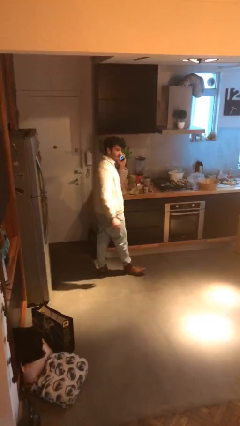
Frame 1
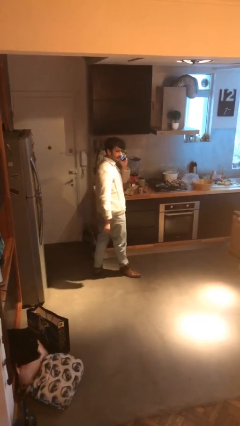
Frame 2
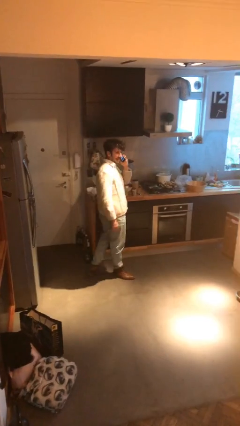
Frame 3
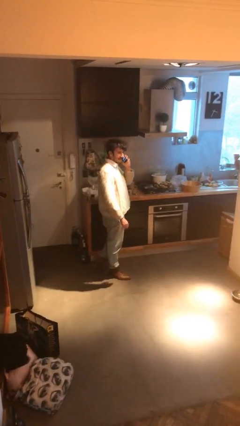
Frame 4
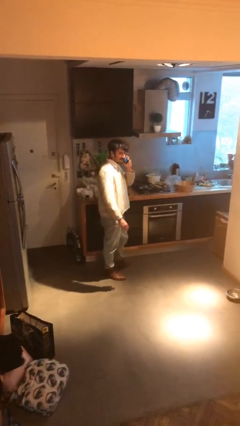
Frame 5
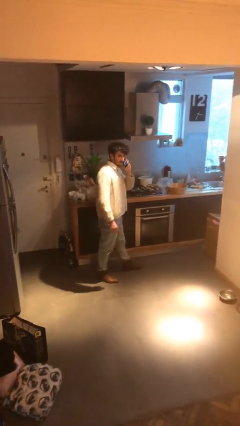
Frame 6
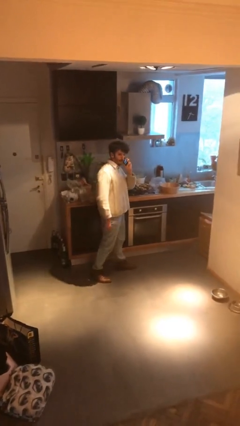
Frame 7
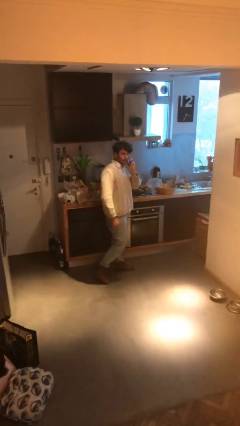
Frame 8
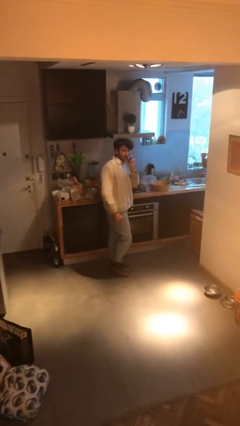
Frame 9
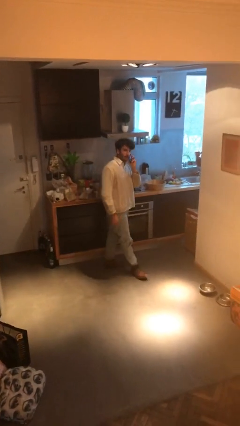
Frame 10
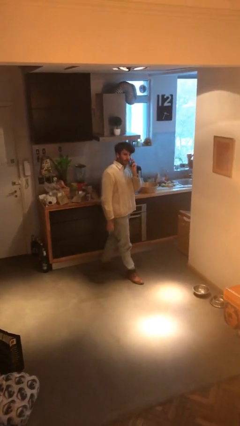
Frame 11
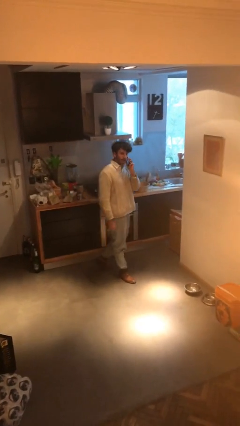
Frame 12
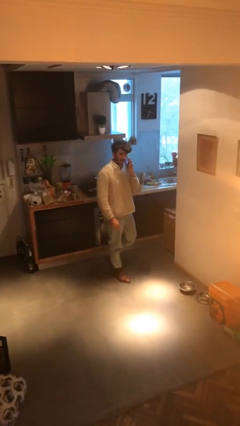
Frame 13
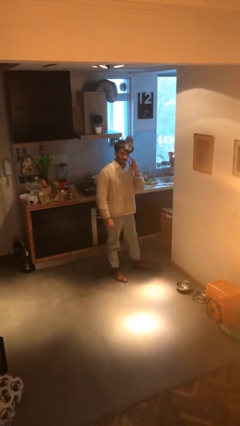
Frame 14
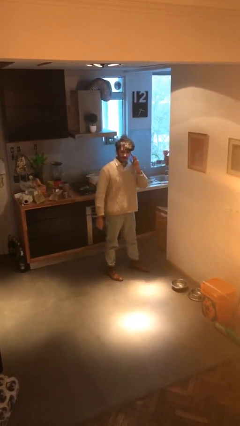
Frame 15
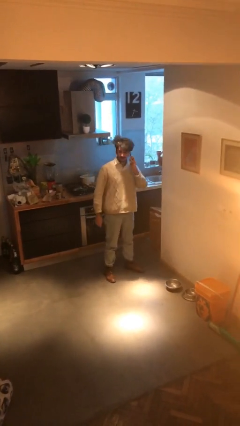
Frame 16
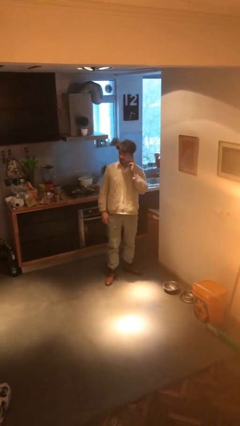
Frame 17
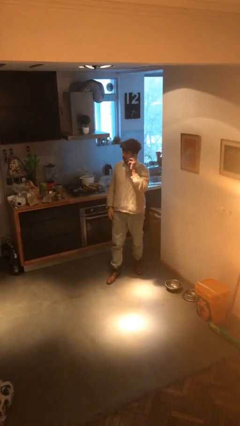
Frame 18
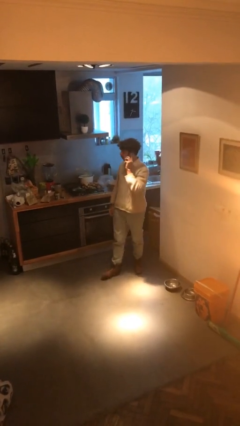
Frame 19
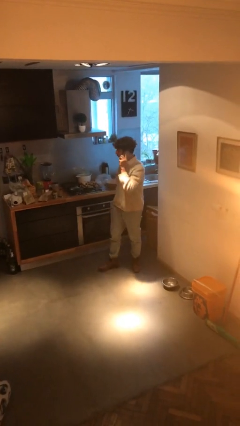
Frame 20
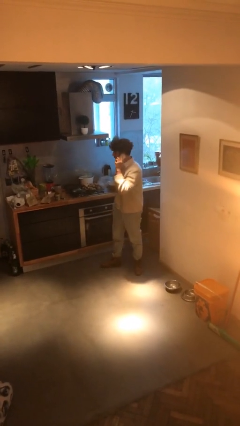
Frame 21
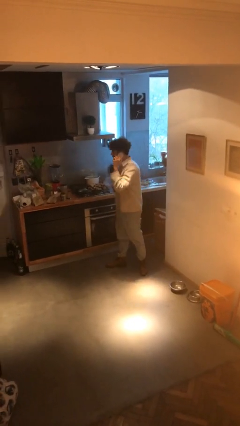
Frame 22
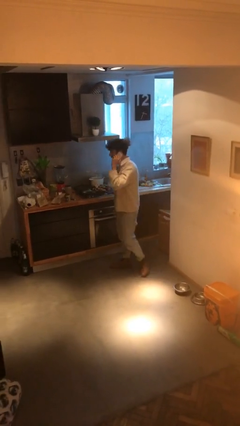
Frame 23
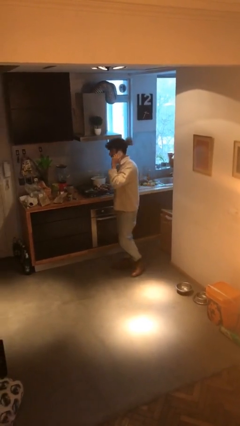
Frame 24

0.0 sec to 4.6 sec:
person talks on phone

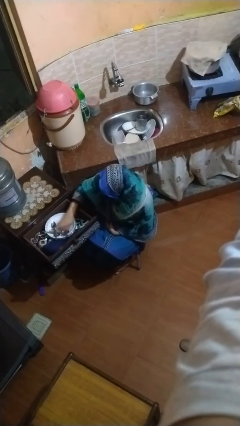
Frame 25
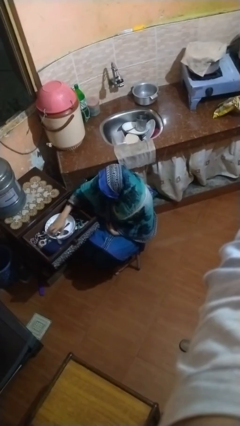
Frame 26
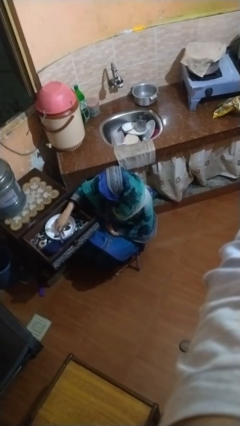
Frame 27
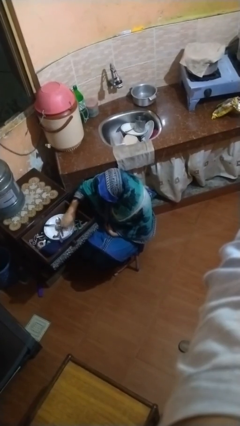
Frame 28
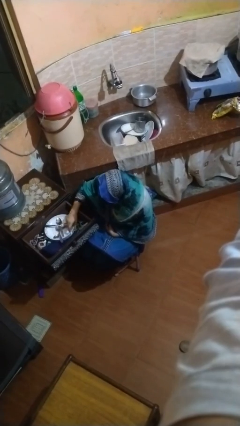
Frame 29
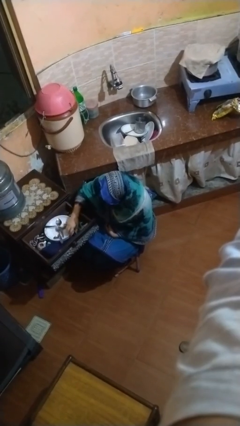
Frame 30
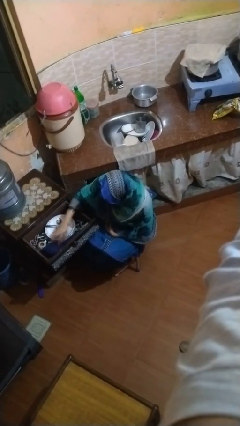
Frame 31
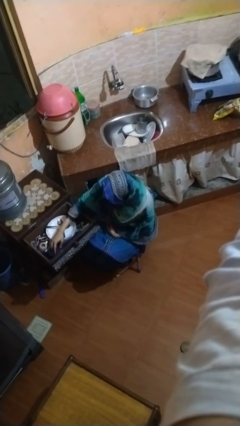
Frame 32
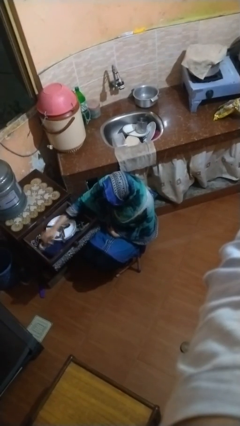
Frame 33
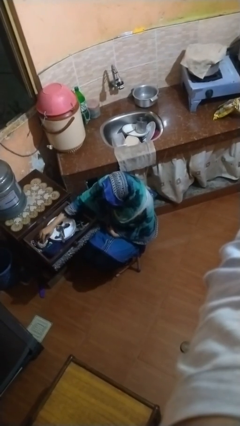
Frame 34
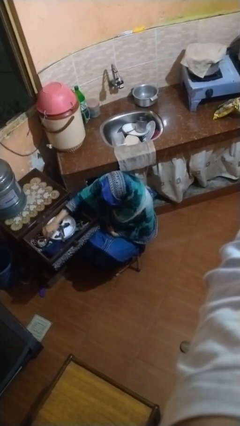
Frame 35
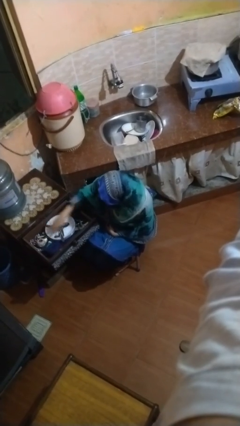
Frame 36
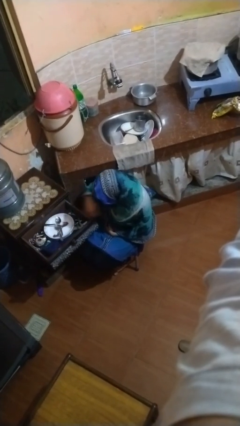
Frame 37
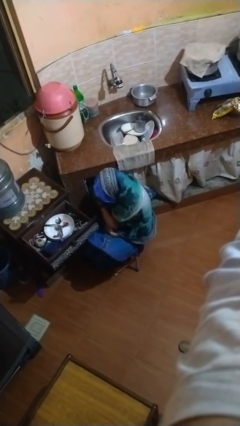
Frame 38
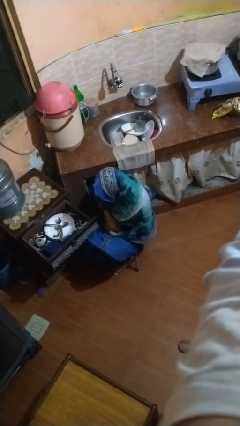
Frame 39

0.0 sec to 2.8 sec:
person searches in kitchen drawer

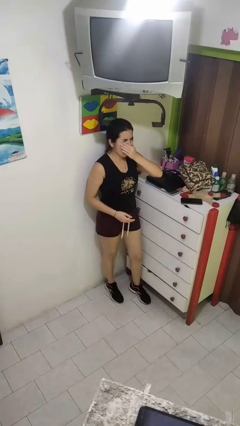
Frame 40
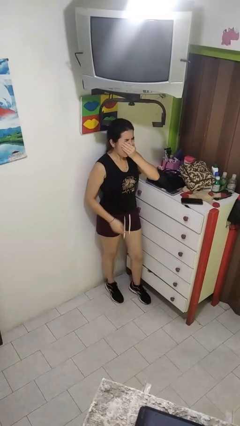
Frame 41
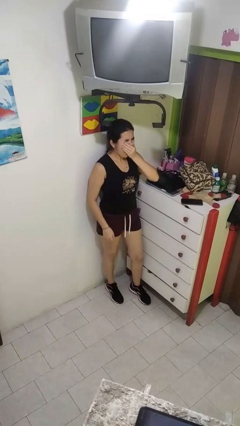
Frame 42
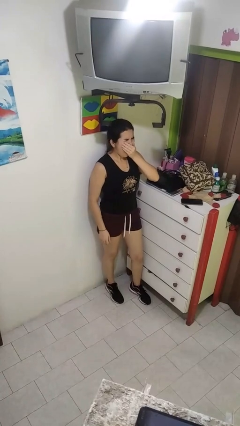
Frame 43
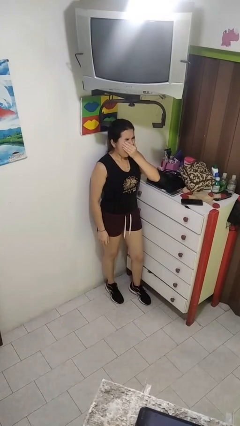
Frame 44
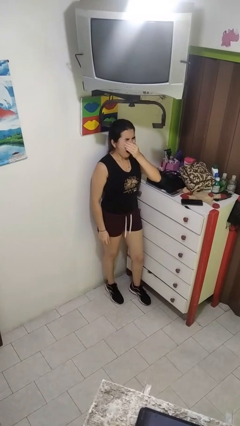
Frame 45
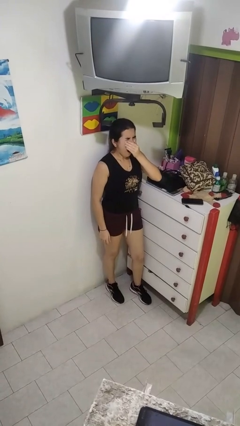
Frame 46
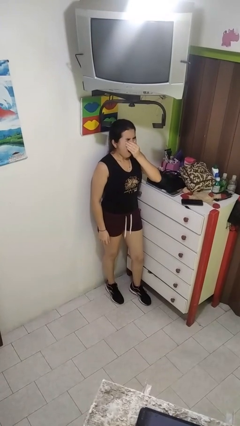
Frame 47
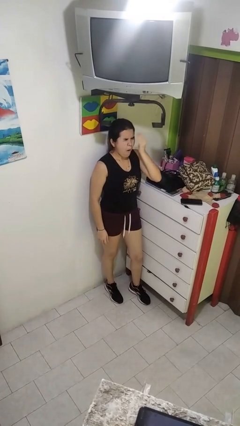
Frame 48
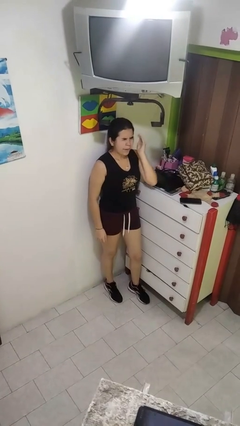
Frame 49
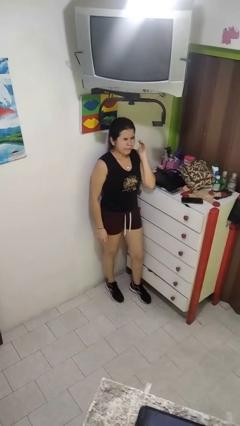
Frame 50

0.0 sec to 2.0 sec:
person yawns

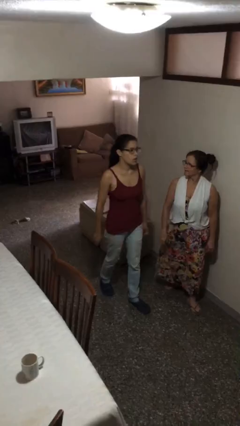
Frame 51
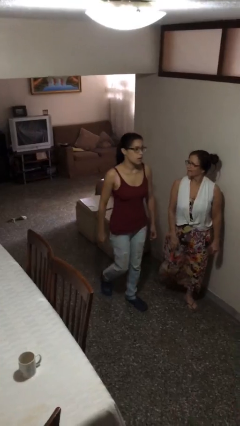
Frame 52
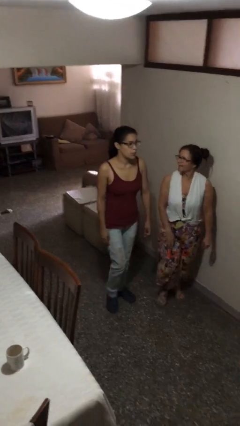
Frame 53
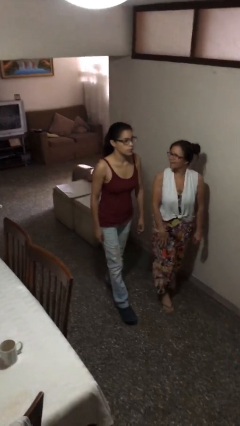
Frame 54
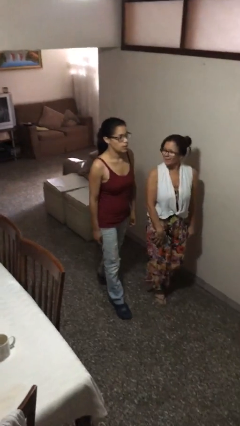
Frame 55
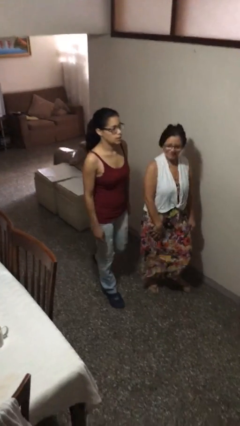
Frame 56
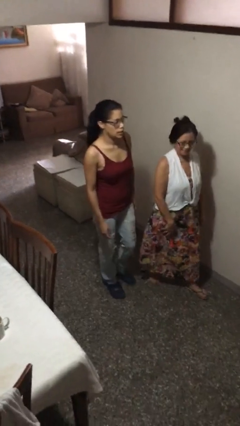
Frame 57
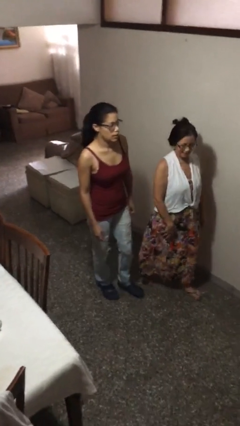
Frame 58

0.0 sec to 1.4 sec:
person talks to person

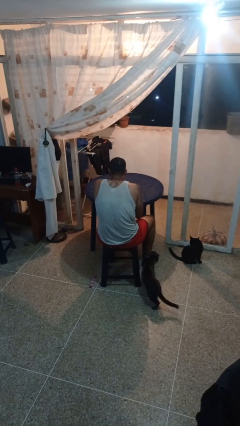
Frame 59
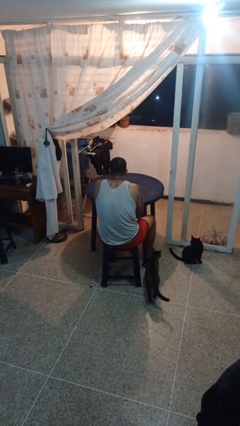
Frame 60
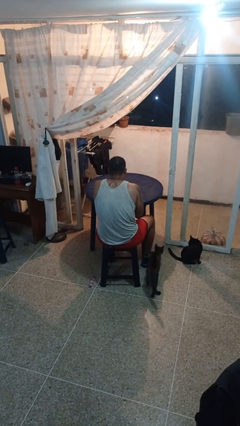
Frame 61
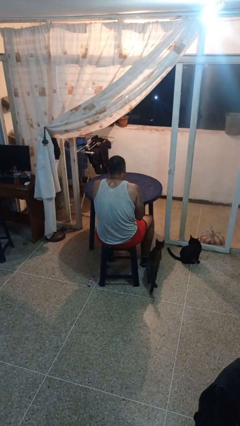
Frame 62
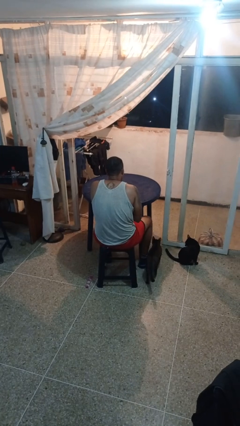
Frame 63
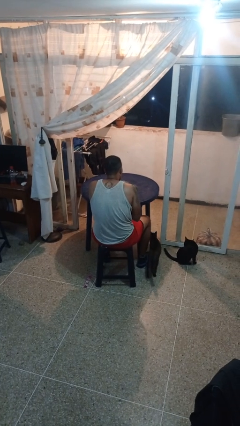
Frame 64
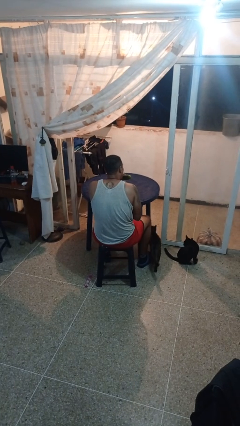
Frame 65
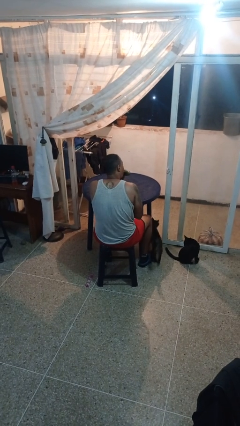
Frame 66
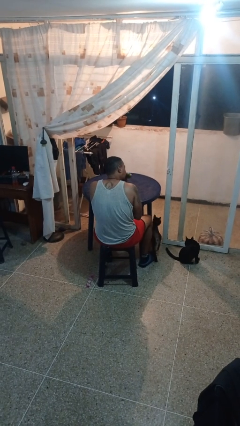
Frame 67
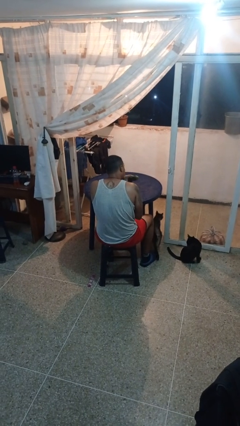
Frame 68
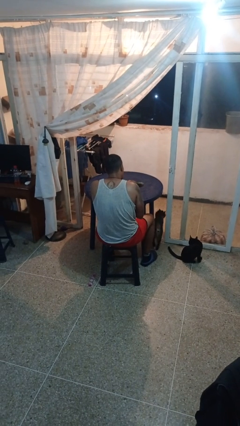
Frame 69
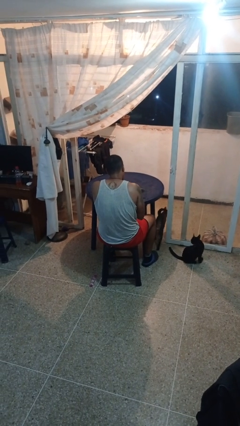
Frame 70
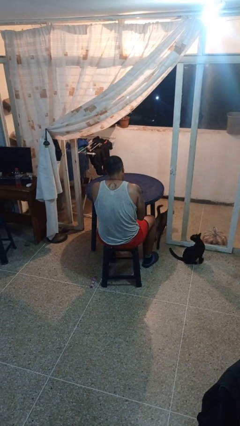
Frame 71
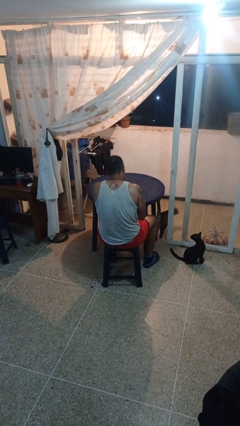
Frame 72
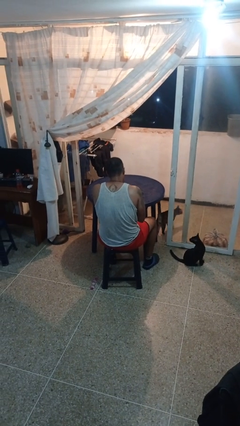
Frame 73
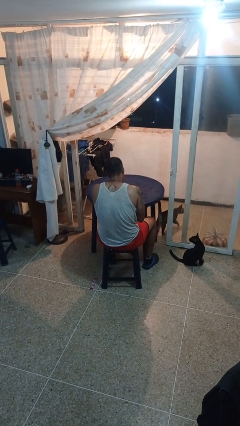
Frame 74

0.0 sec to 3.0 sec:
person eats with hands

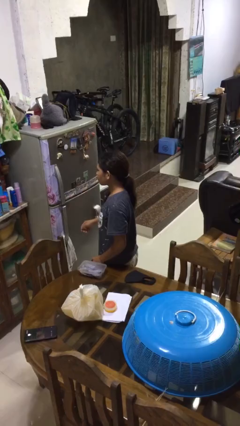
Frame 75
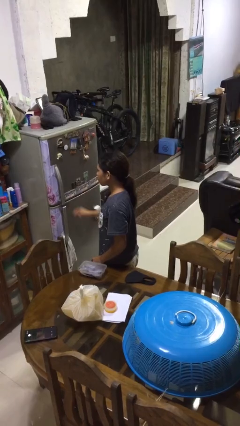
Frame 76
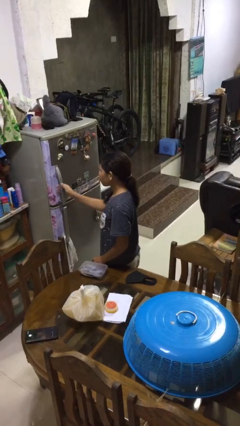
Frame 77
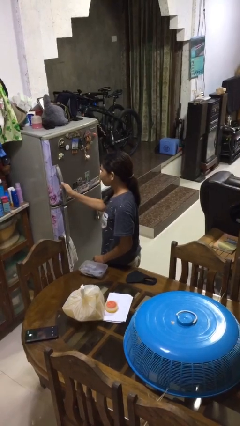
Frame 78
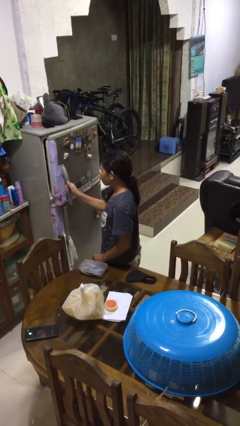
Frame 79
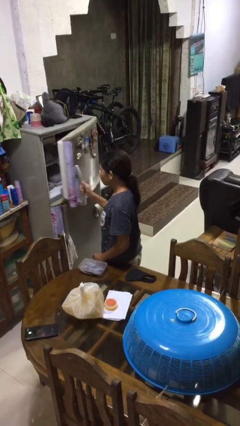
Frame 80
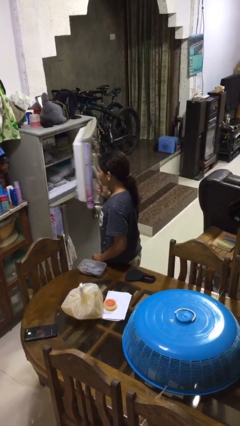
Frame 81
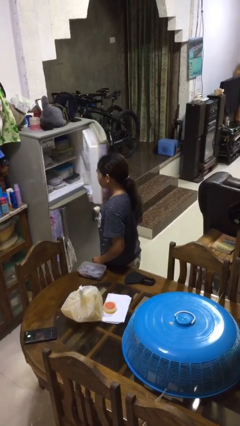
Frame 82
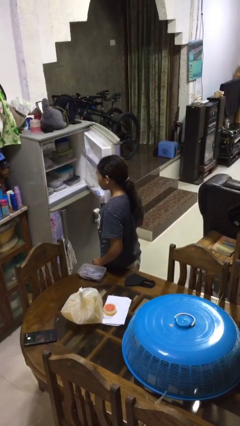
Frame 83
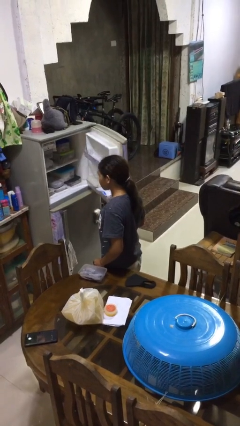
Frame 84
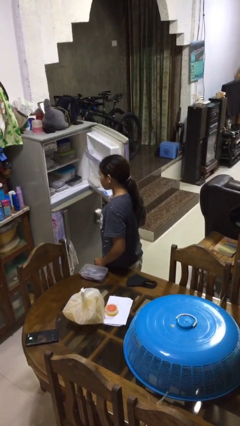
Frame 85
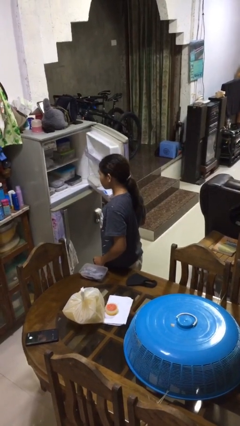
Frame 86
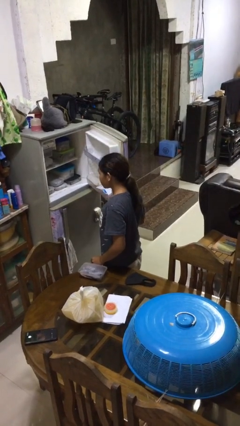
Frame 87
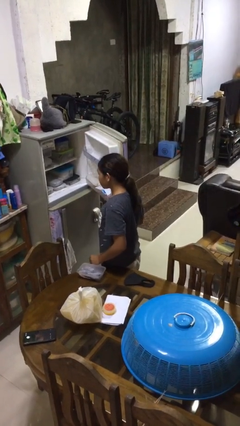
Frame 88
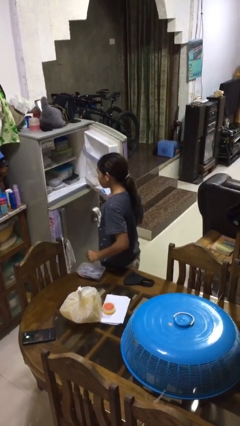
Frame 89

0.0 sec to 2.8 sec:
person opens refrigerator

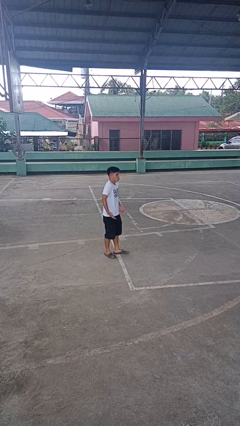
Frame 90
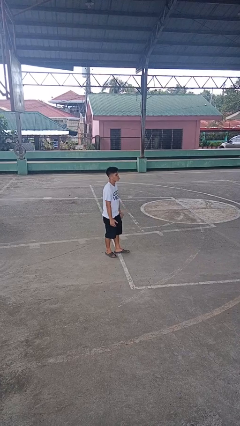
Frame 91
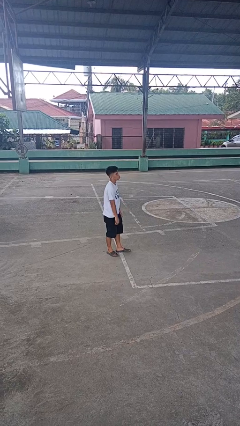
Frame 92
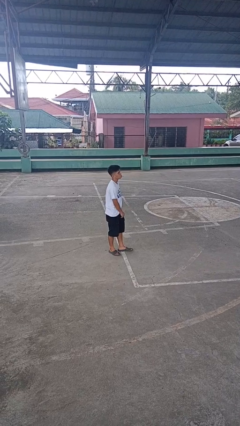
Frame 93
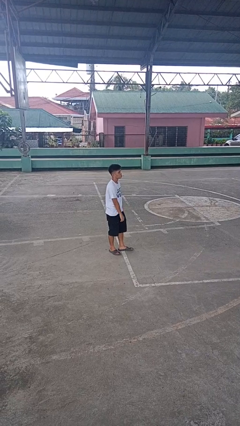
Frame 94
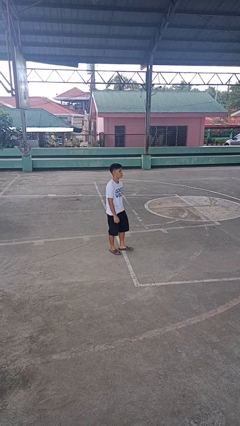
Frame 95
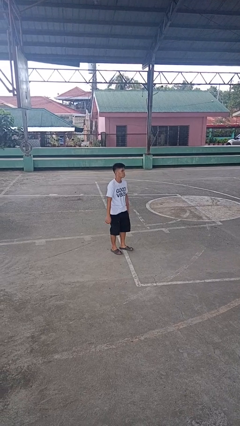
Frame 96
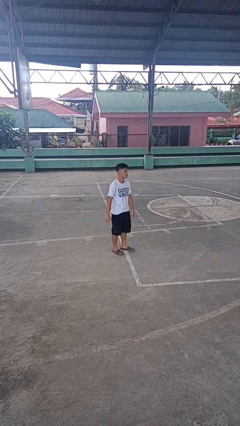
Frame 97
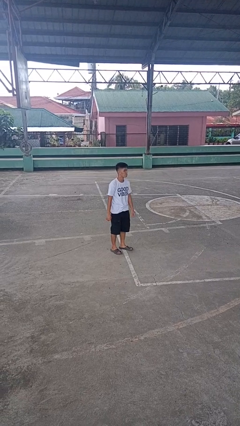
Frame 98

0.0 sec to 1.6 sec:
person shrugs
